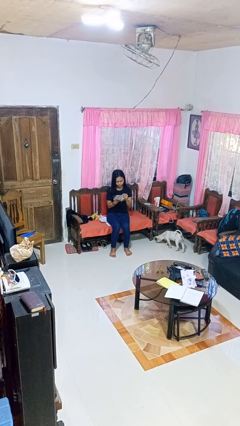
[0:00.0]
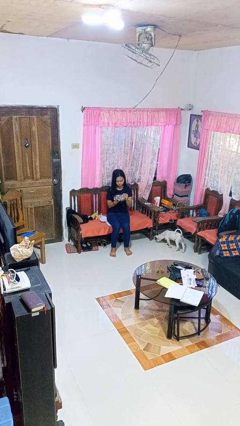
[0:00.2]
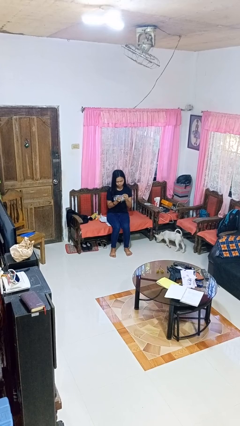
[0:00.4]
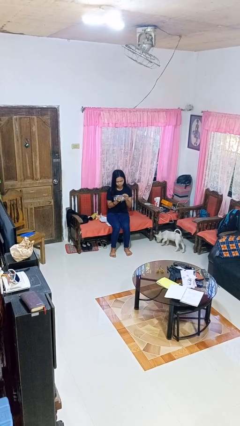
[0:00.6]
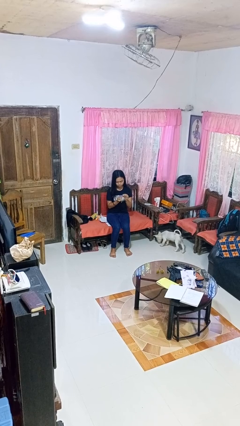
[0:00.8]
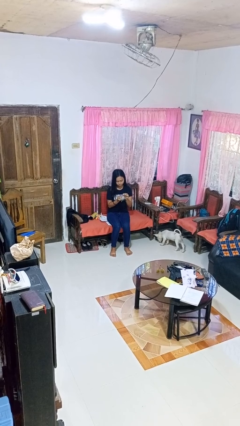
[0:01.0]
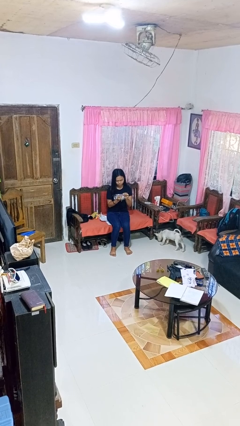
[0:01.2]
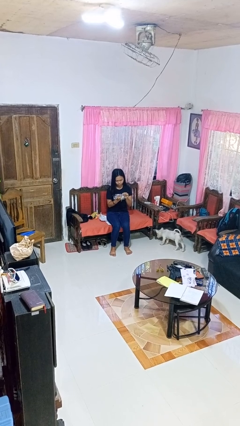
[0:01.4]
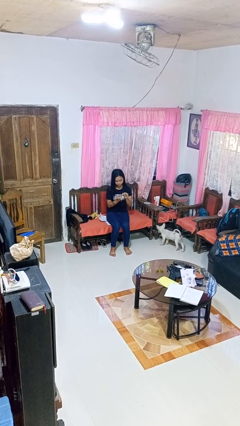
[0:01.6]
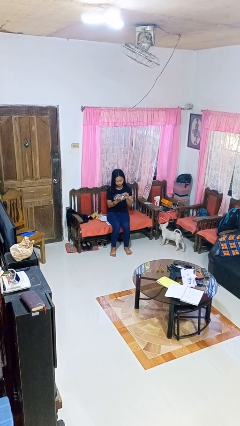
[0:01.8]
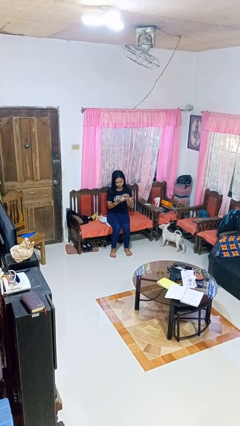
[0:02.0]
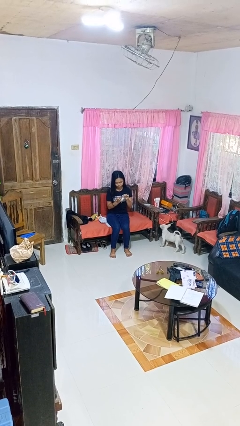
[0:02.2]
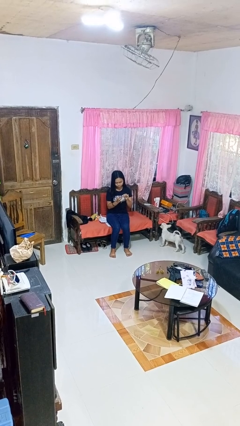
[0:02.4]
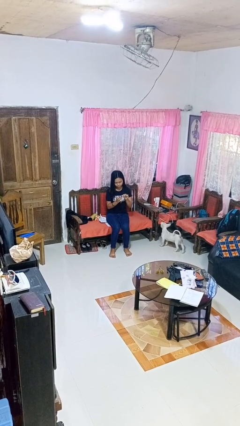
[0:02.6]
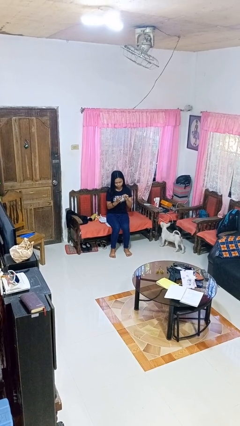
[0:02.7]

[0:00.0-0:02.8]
person clips fingernails

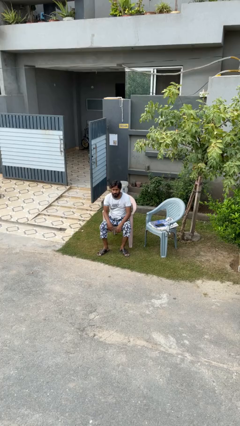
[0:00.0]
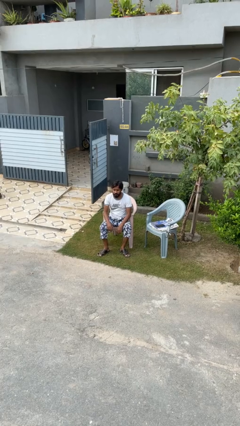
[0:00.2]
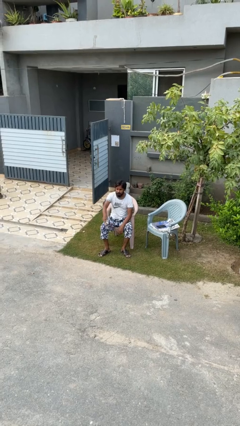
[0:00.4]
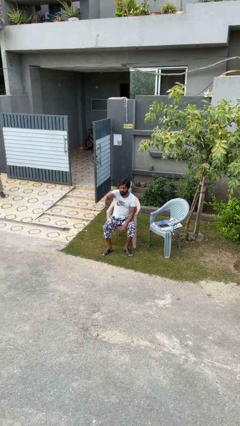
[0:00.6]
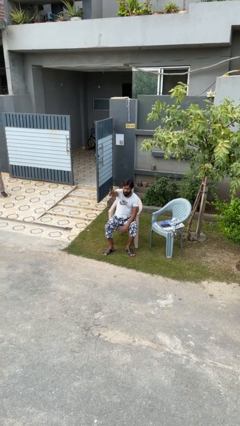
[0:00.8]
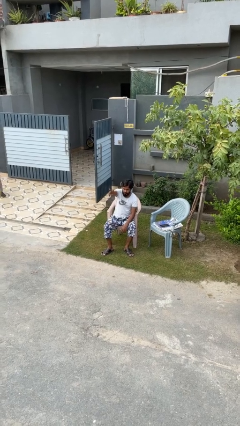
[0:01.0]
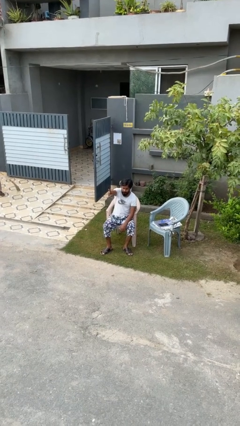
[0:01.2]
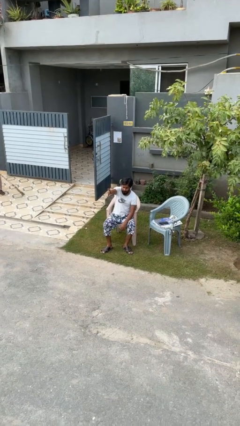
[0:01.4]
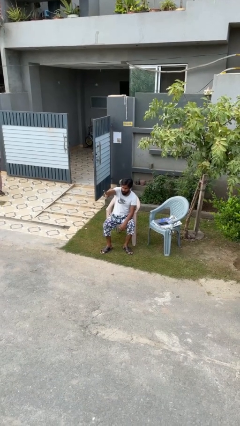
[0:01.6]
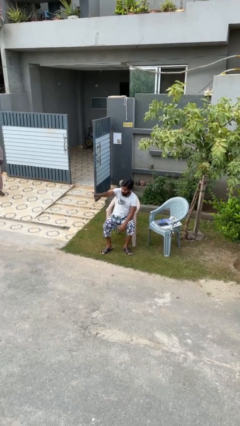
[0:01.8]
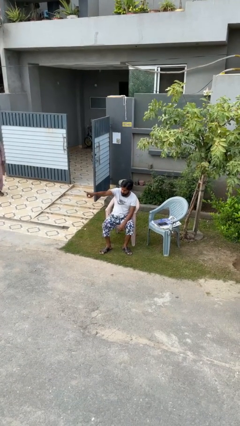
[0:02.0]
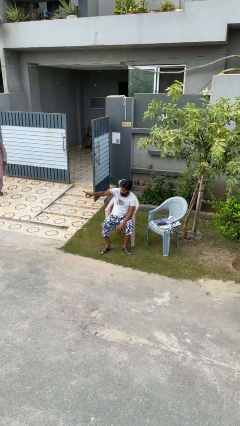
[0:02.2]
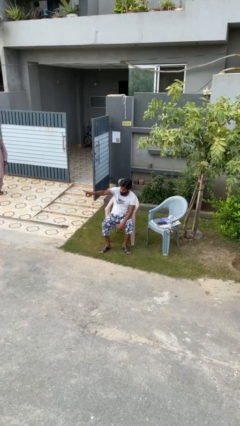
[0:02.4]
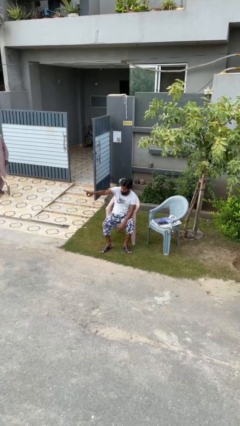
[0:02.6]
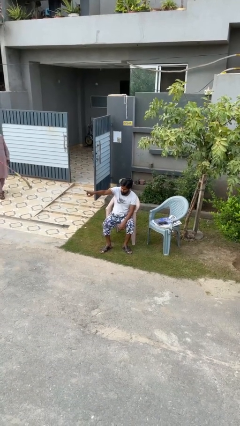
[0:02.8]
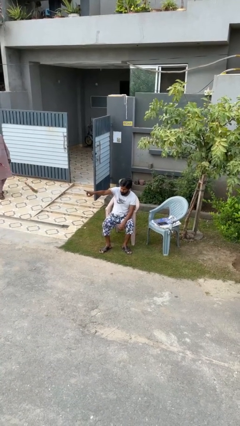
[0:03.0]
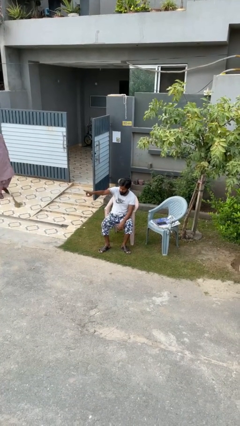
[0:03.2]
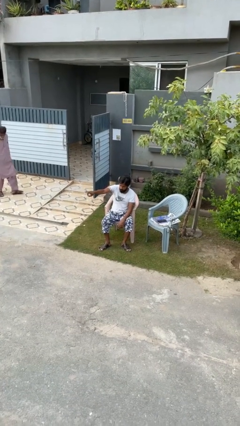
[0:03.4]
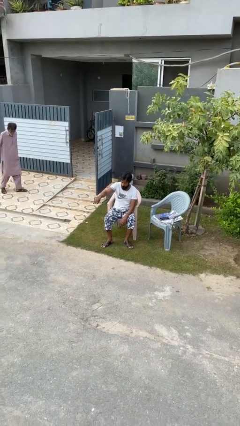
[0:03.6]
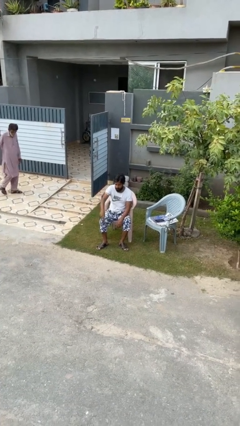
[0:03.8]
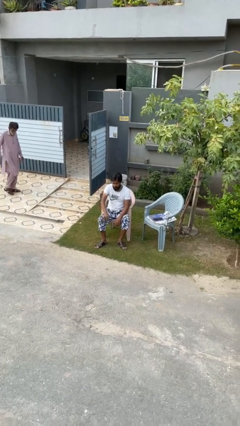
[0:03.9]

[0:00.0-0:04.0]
person gestures peace

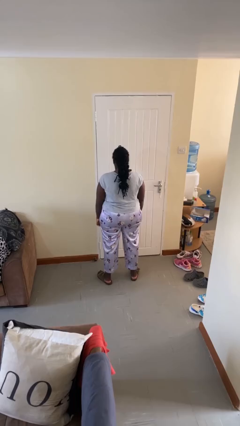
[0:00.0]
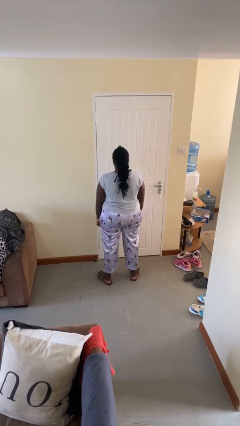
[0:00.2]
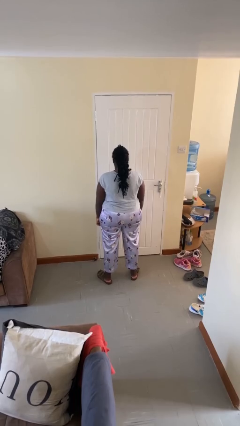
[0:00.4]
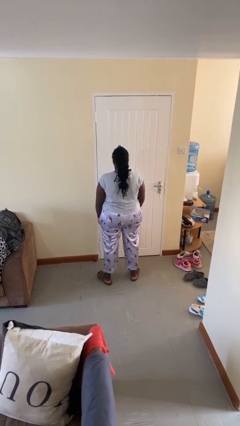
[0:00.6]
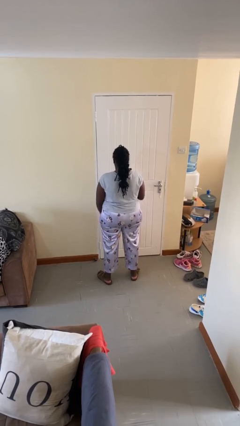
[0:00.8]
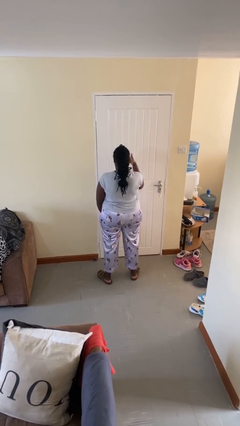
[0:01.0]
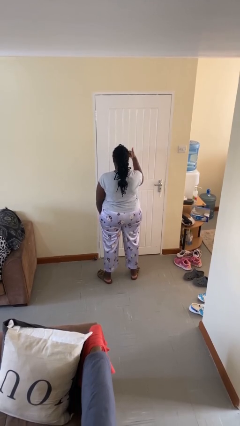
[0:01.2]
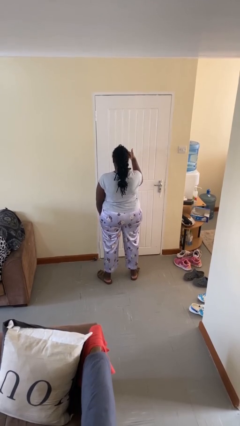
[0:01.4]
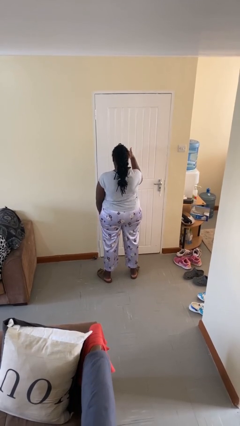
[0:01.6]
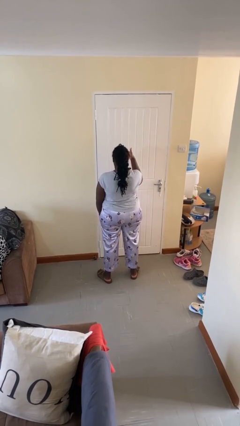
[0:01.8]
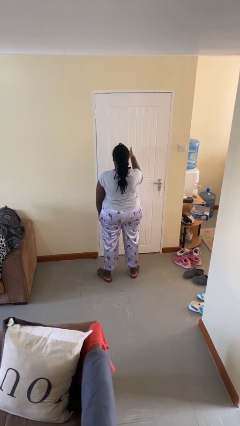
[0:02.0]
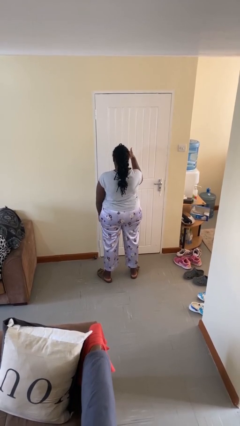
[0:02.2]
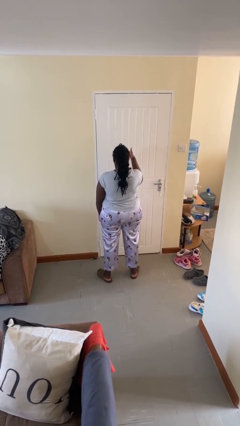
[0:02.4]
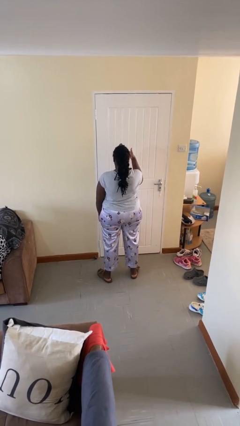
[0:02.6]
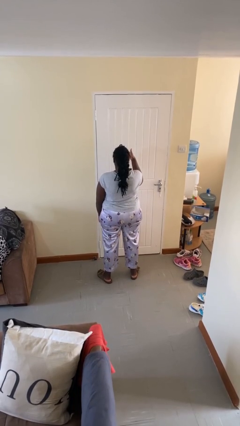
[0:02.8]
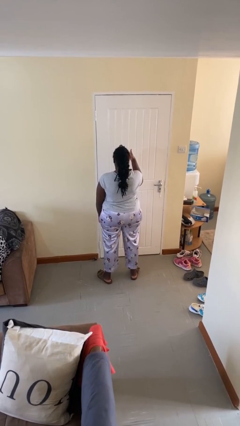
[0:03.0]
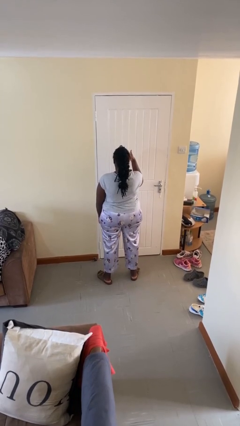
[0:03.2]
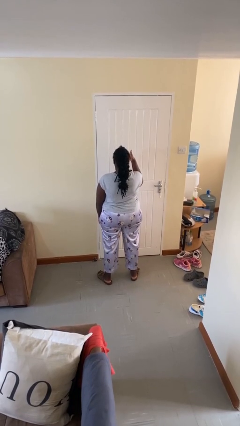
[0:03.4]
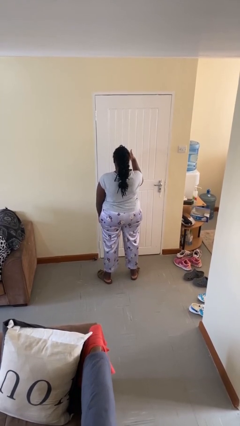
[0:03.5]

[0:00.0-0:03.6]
person gestures thumbs up

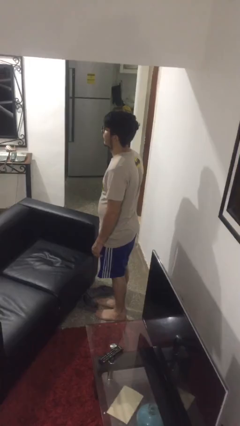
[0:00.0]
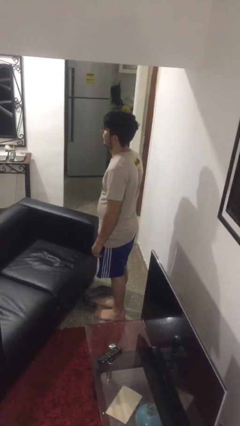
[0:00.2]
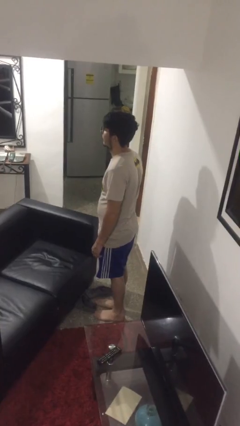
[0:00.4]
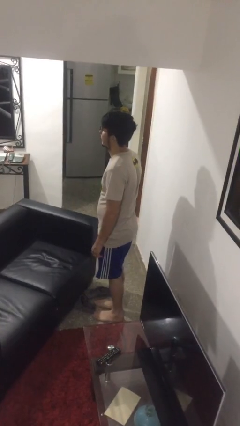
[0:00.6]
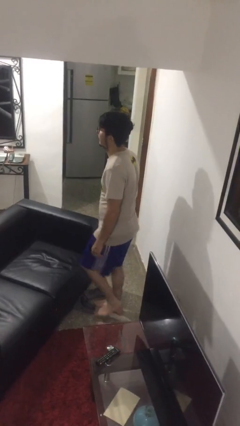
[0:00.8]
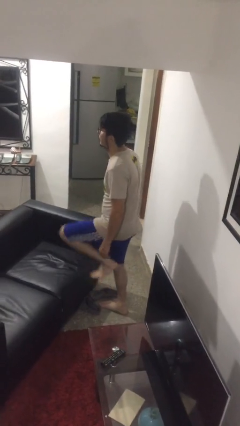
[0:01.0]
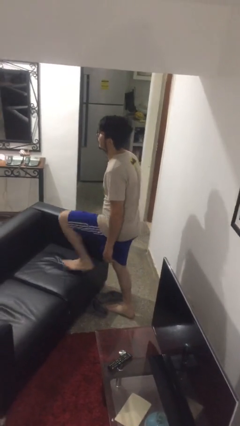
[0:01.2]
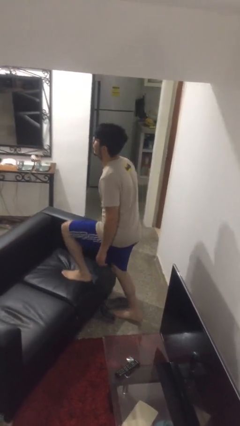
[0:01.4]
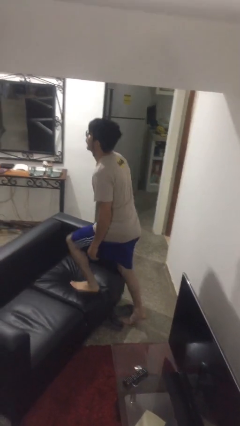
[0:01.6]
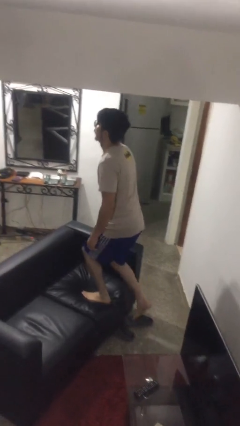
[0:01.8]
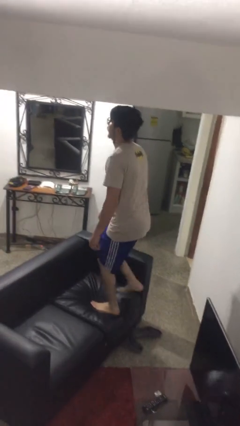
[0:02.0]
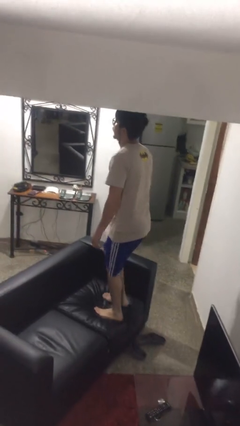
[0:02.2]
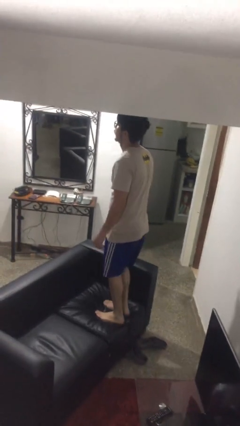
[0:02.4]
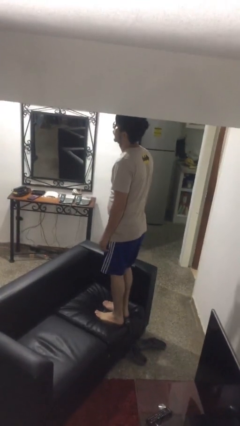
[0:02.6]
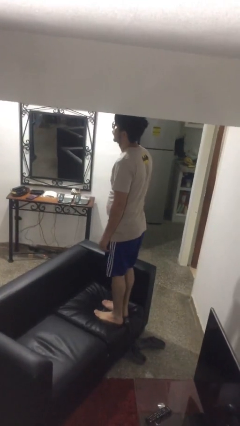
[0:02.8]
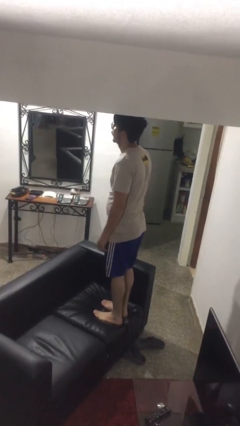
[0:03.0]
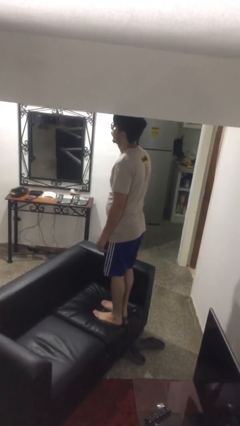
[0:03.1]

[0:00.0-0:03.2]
person climbs on couch

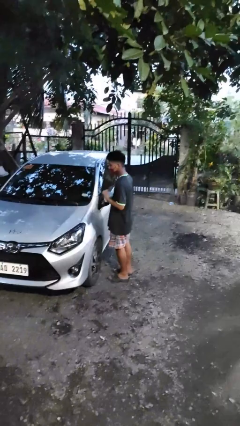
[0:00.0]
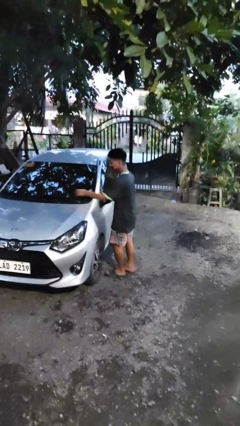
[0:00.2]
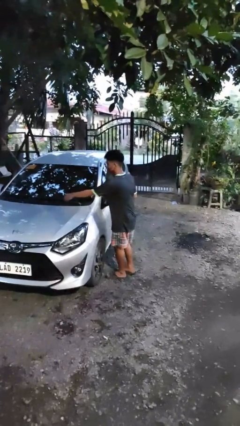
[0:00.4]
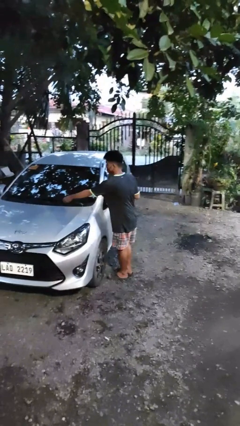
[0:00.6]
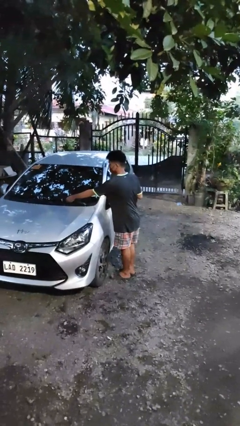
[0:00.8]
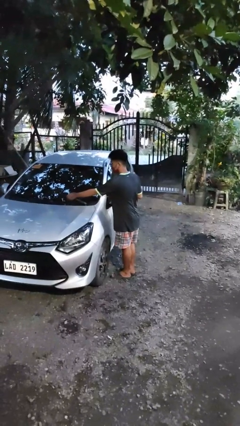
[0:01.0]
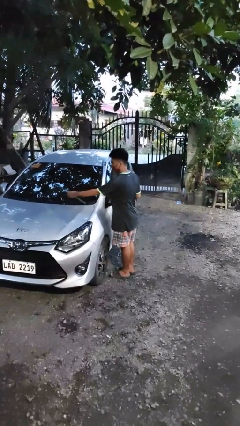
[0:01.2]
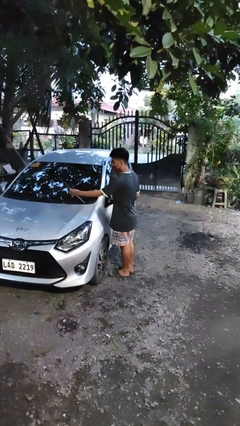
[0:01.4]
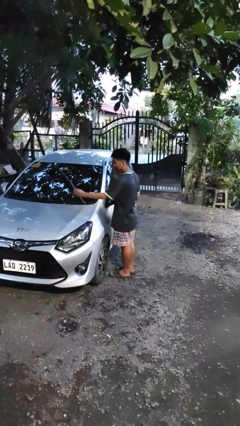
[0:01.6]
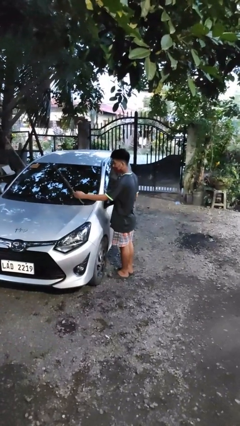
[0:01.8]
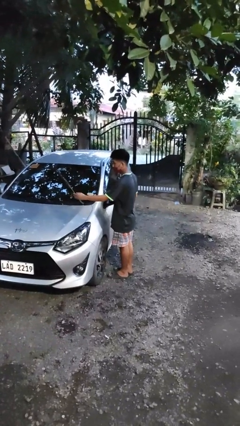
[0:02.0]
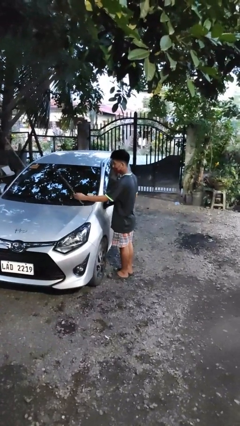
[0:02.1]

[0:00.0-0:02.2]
person flips up car wipers

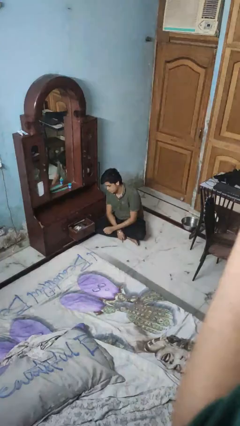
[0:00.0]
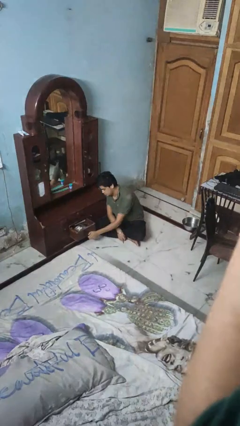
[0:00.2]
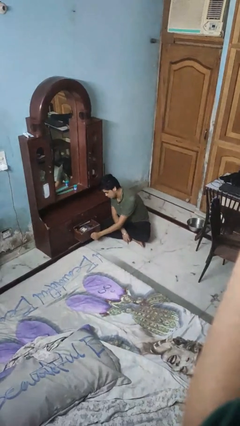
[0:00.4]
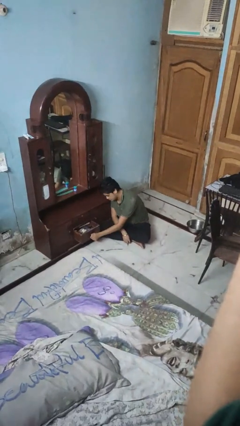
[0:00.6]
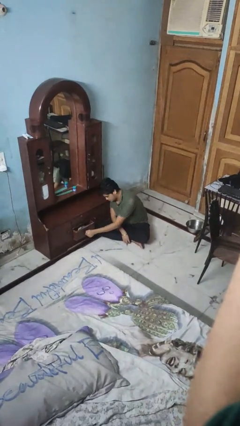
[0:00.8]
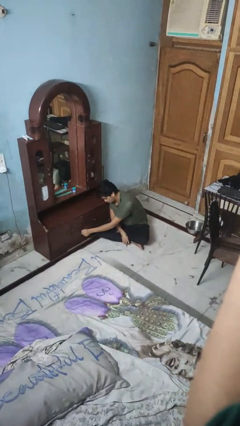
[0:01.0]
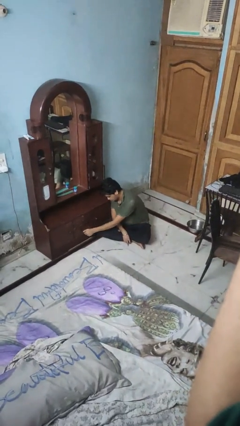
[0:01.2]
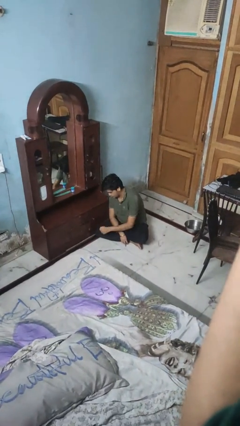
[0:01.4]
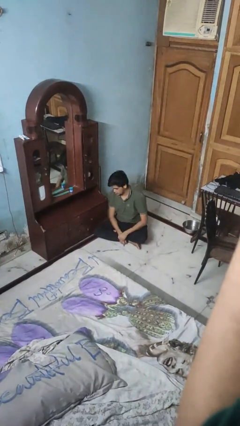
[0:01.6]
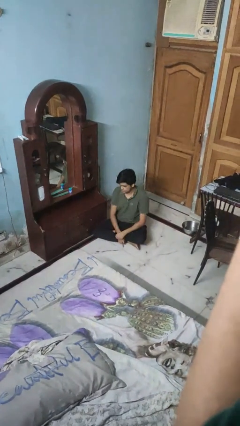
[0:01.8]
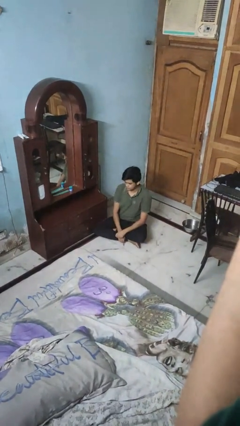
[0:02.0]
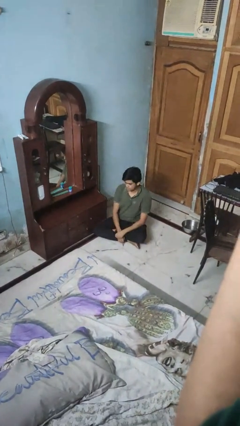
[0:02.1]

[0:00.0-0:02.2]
person closes dresser drawer
